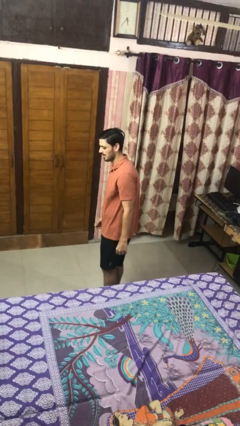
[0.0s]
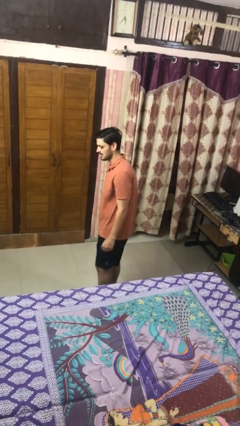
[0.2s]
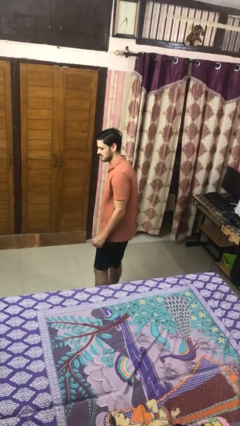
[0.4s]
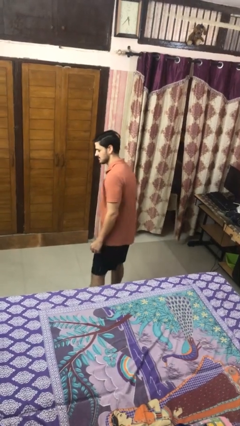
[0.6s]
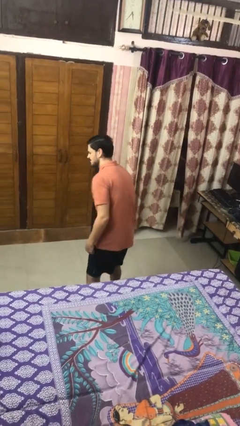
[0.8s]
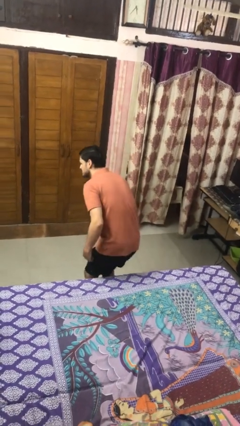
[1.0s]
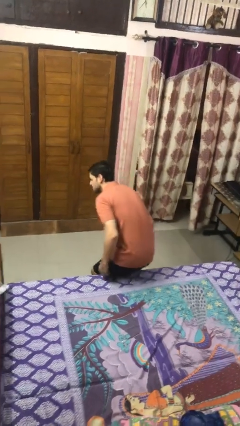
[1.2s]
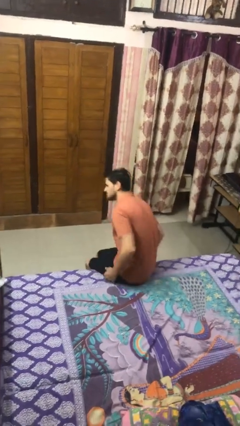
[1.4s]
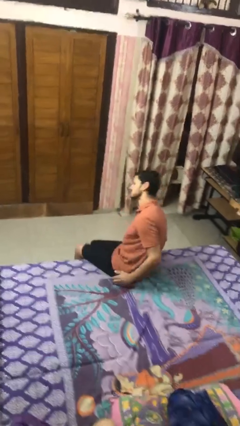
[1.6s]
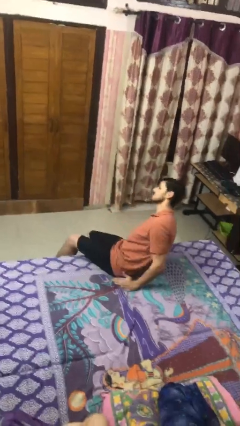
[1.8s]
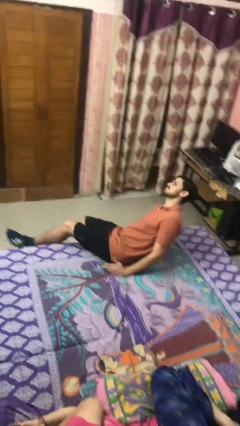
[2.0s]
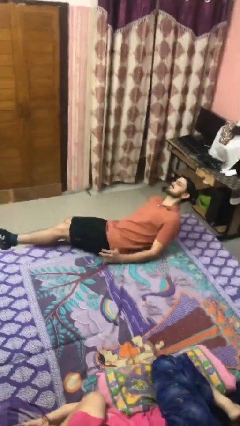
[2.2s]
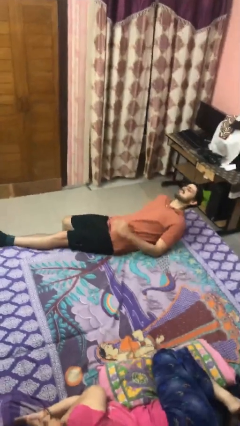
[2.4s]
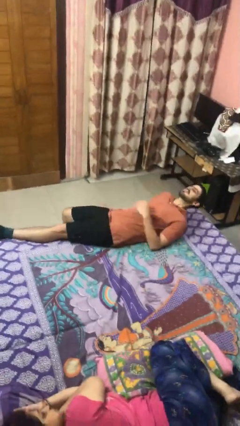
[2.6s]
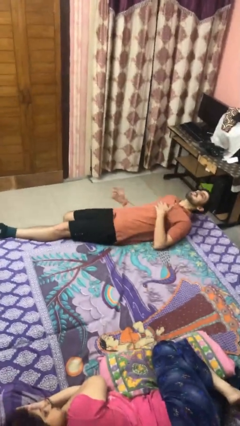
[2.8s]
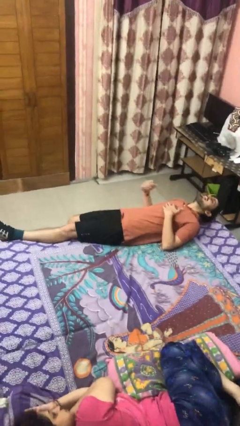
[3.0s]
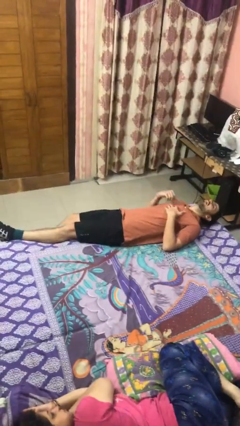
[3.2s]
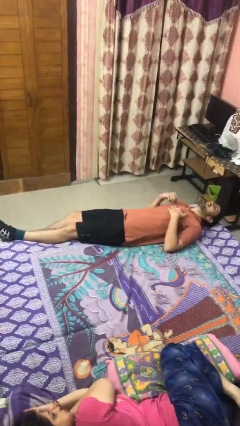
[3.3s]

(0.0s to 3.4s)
person lies down on bed

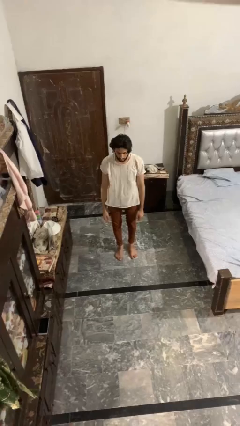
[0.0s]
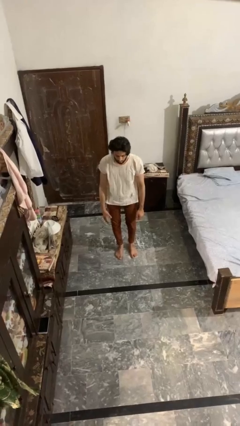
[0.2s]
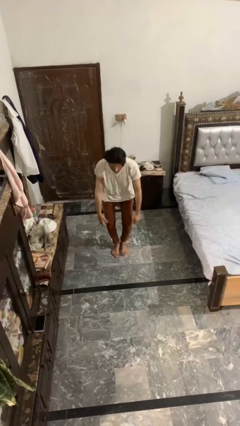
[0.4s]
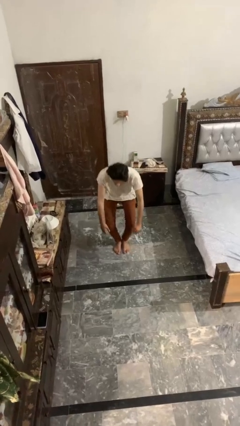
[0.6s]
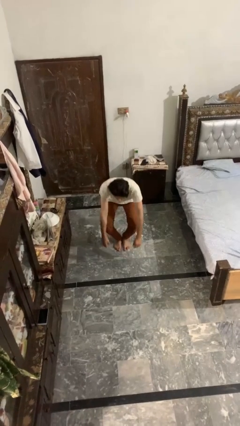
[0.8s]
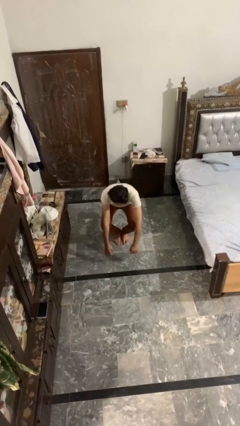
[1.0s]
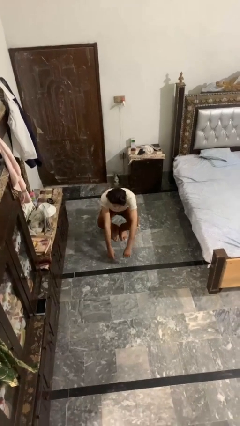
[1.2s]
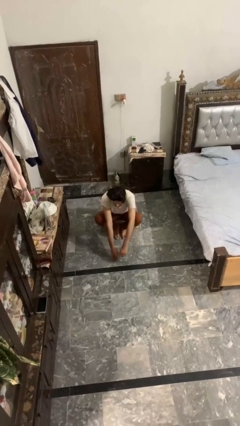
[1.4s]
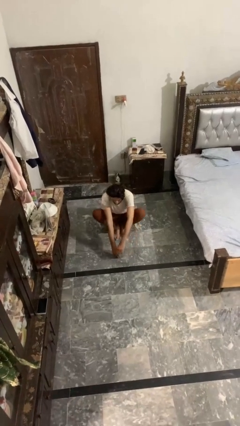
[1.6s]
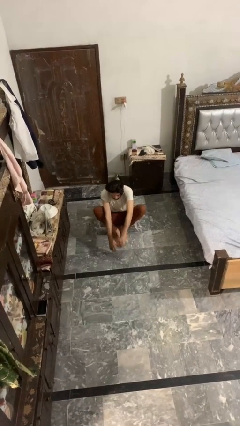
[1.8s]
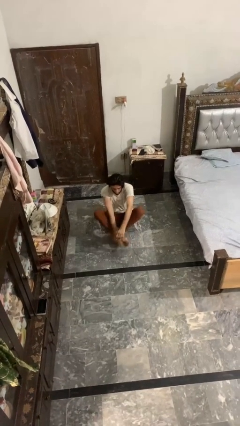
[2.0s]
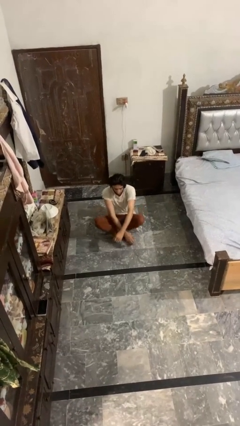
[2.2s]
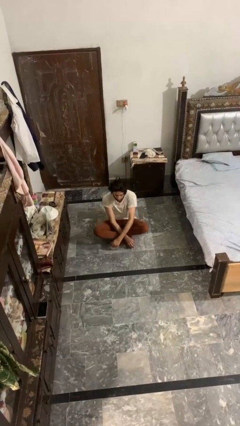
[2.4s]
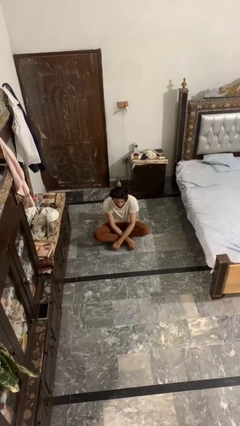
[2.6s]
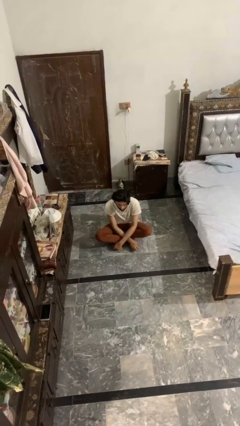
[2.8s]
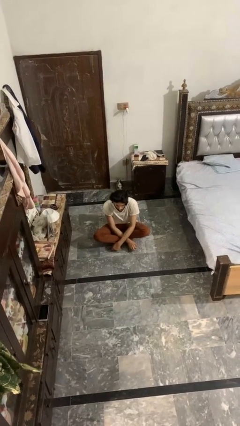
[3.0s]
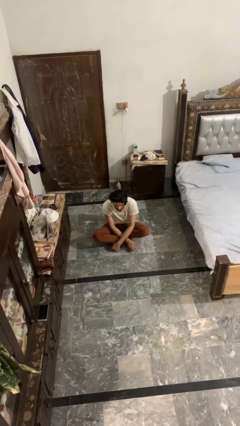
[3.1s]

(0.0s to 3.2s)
person sits crisscross

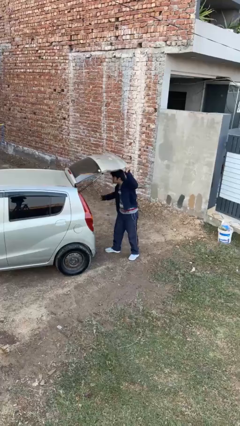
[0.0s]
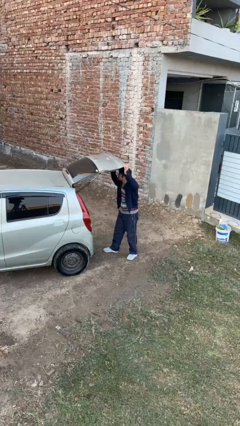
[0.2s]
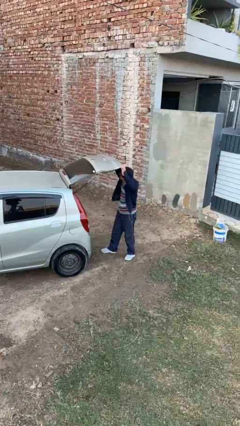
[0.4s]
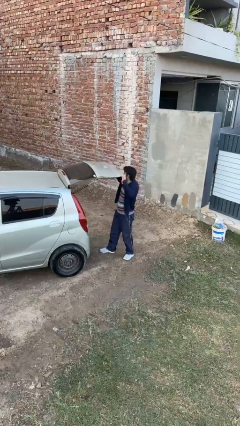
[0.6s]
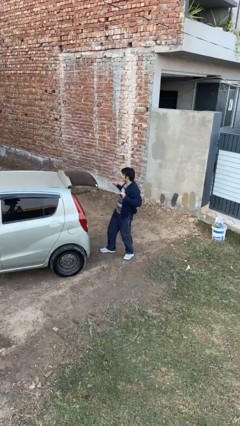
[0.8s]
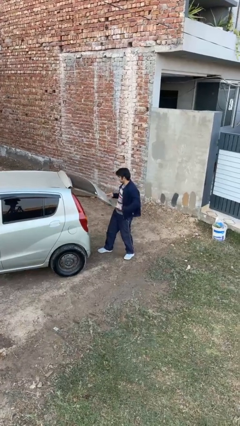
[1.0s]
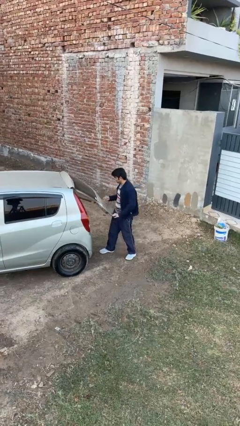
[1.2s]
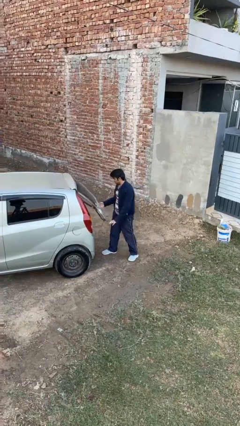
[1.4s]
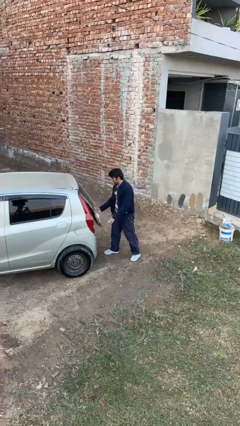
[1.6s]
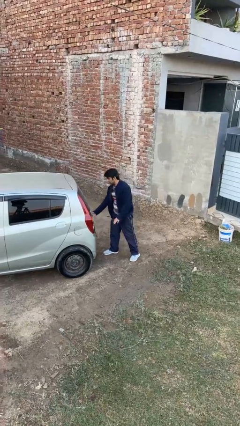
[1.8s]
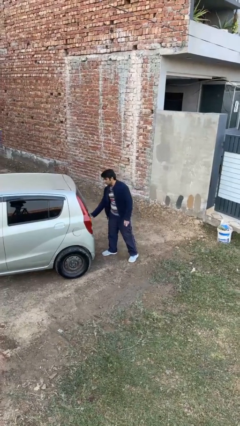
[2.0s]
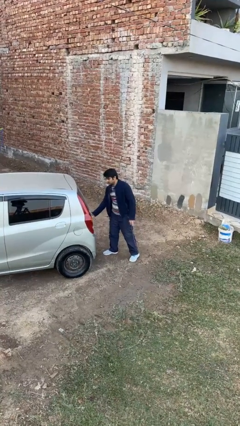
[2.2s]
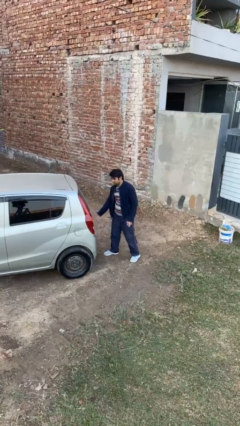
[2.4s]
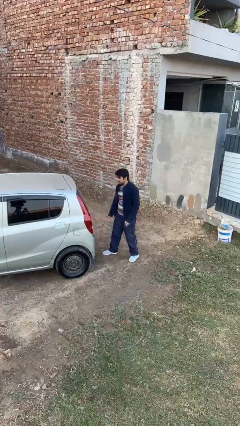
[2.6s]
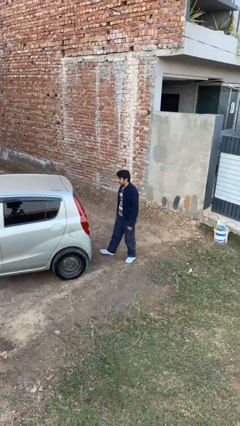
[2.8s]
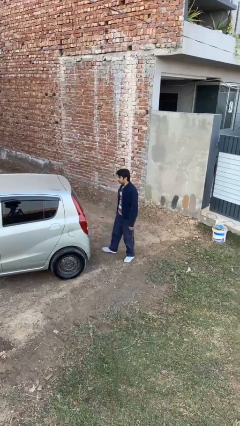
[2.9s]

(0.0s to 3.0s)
person closes car trunk

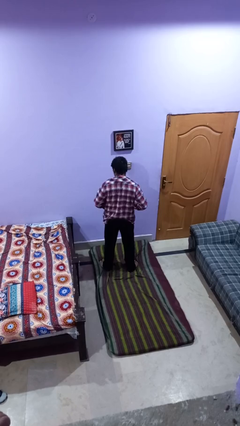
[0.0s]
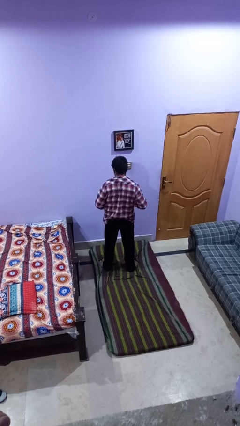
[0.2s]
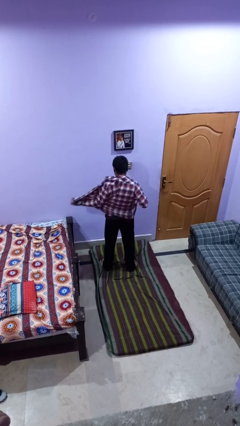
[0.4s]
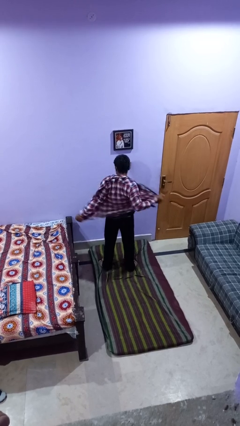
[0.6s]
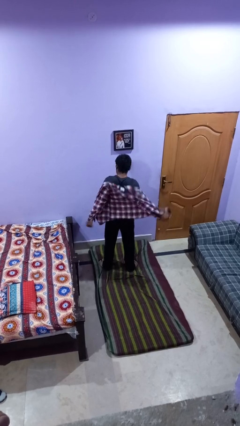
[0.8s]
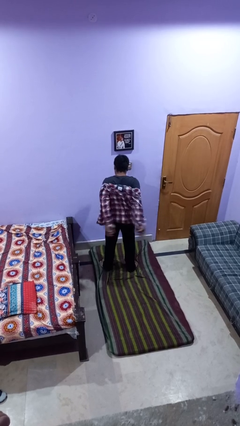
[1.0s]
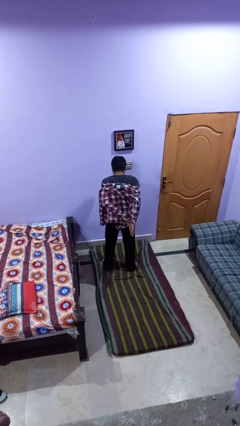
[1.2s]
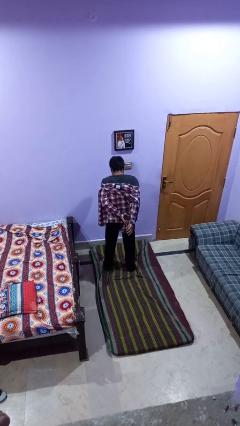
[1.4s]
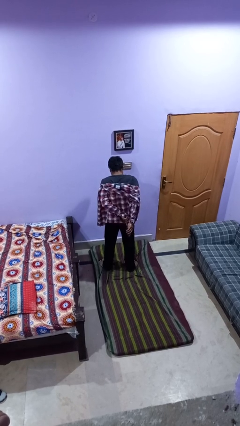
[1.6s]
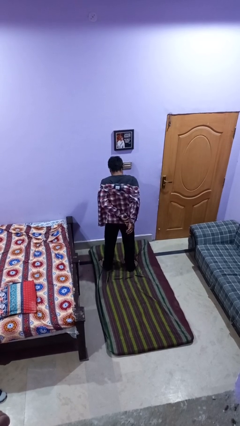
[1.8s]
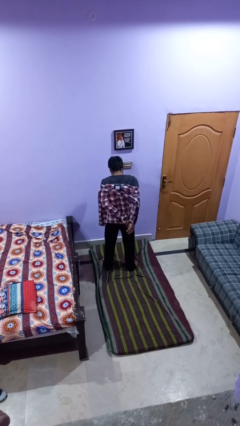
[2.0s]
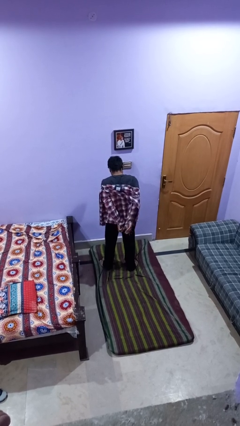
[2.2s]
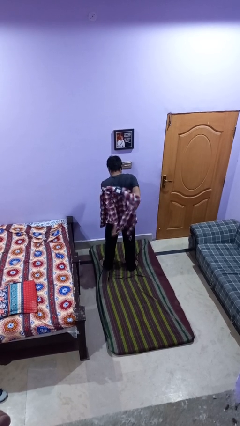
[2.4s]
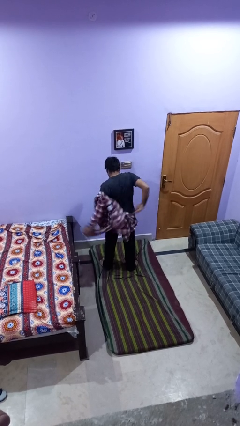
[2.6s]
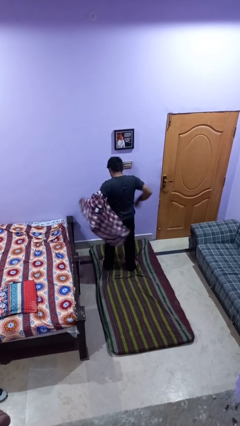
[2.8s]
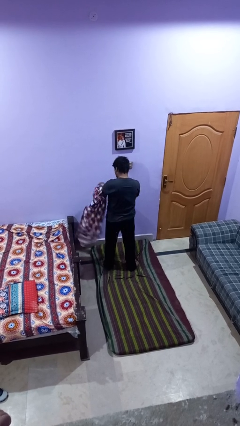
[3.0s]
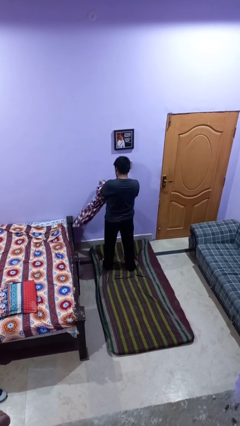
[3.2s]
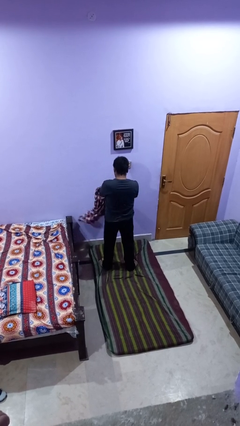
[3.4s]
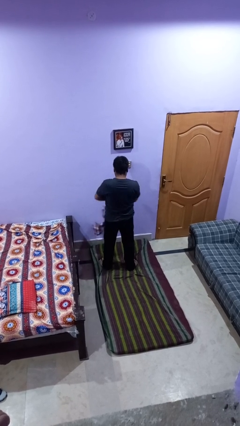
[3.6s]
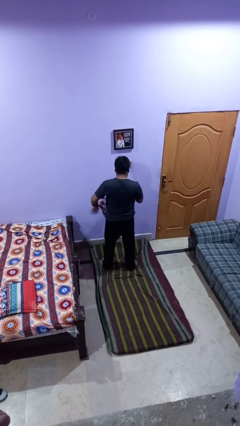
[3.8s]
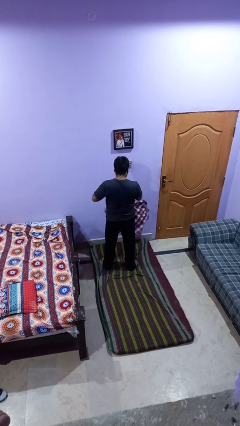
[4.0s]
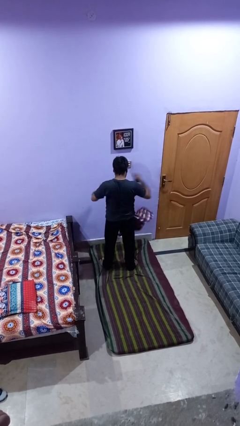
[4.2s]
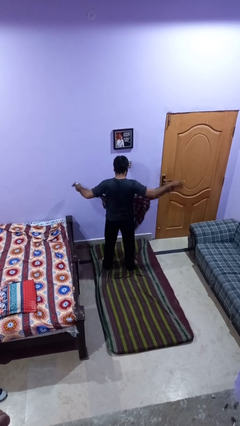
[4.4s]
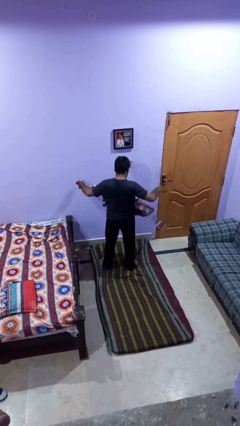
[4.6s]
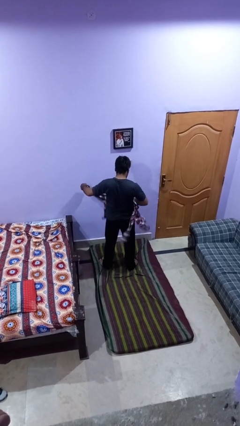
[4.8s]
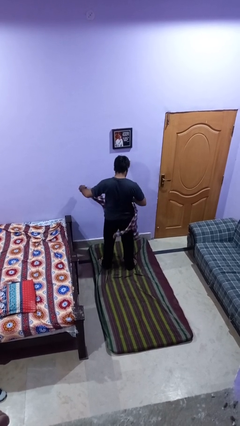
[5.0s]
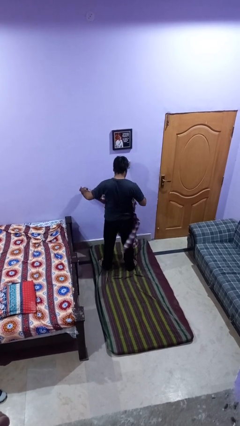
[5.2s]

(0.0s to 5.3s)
person takes off shirt

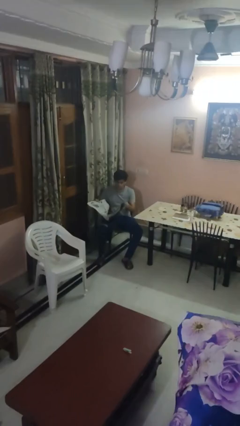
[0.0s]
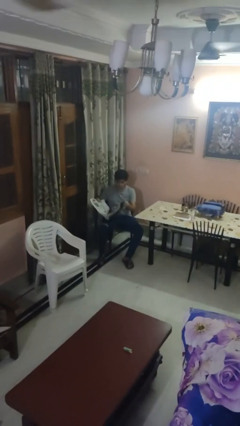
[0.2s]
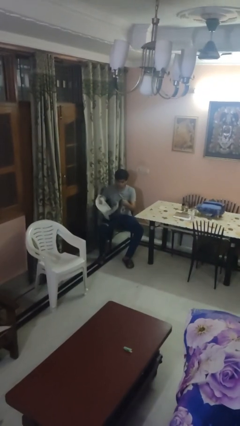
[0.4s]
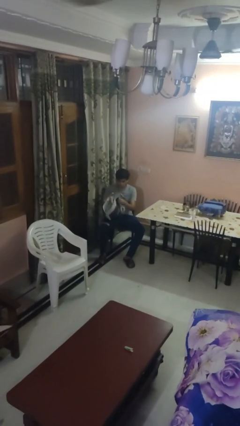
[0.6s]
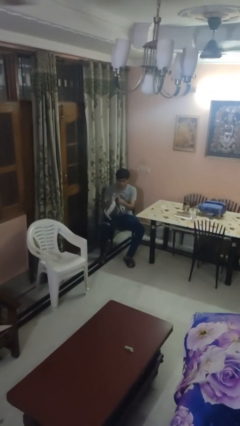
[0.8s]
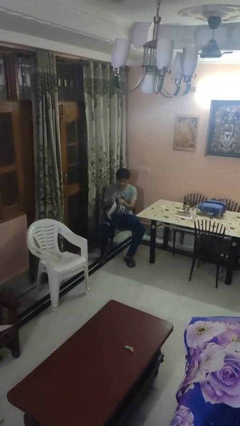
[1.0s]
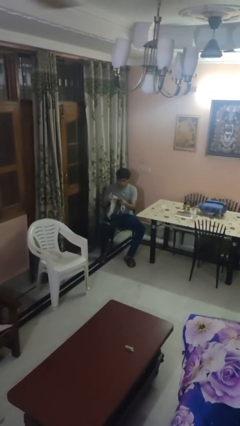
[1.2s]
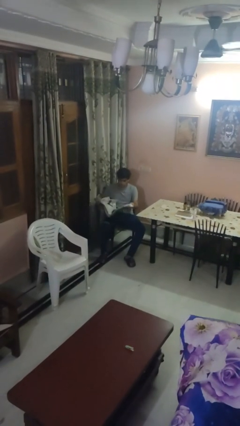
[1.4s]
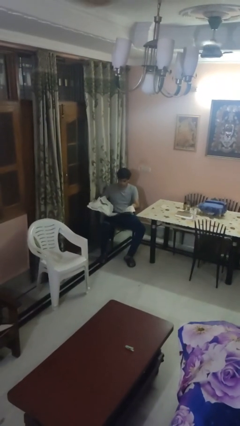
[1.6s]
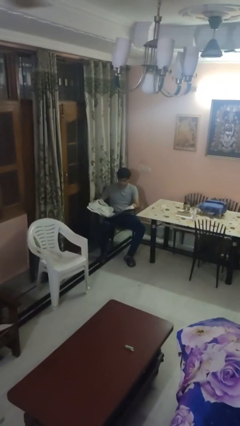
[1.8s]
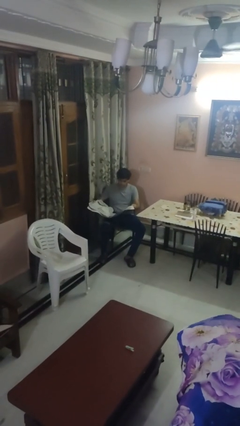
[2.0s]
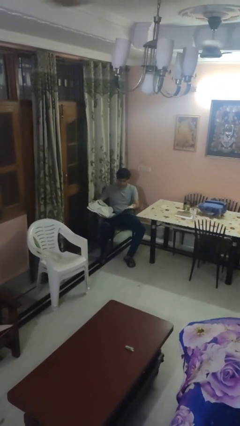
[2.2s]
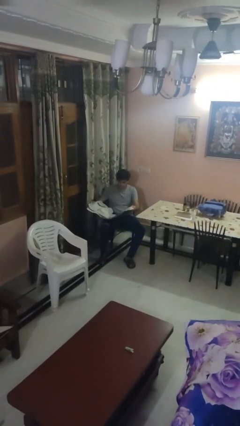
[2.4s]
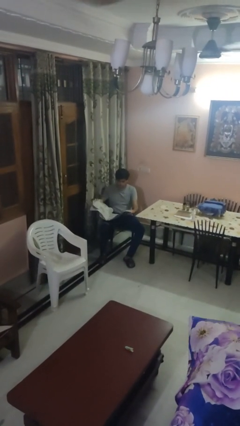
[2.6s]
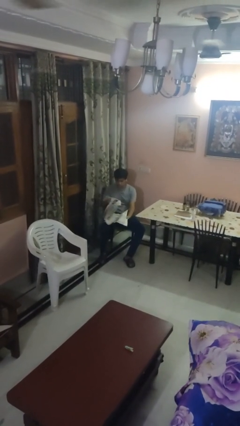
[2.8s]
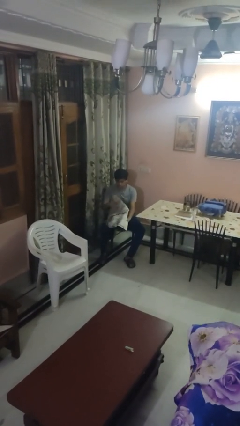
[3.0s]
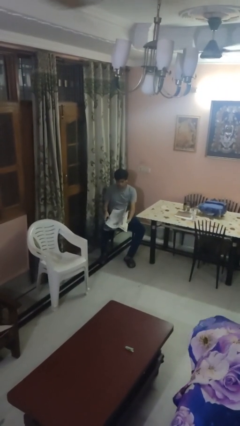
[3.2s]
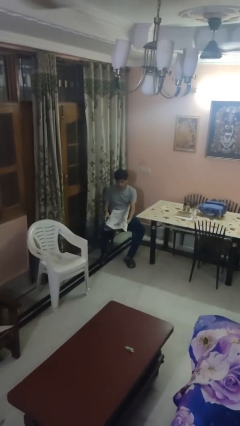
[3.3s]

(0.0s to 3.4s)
person reads newspaper
